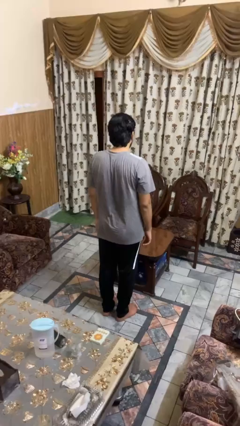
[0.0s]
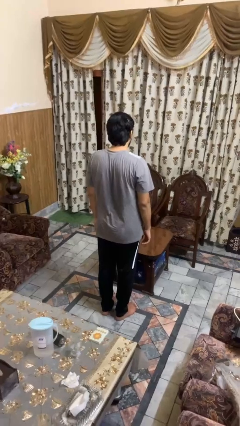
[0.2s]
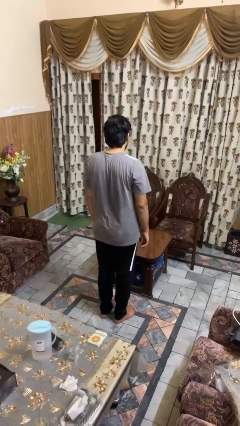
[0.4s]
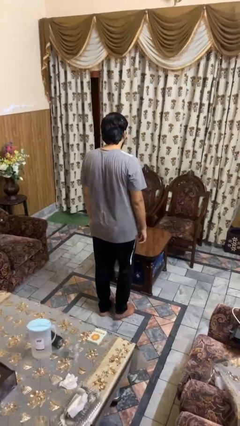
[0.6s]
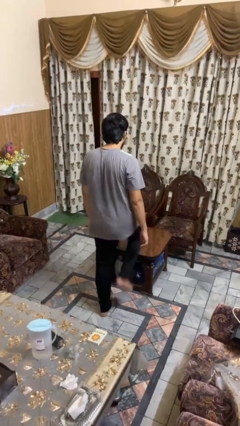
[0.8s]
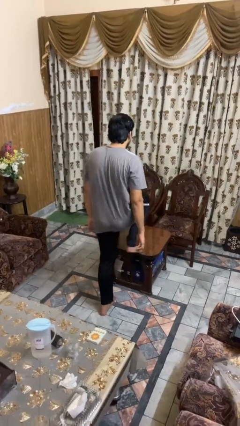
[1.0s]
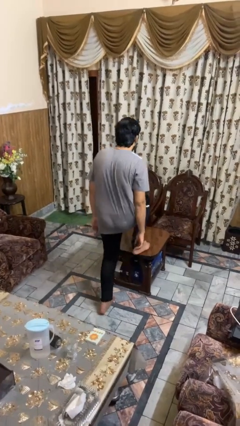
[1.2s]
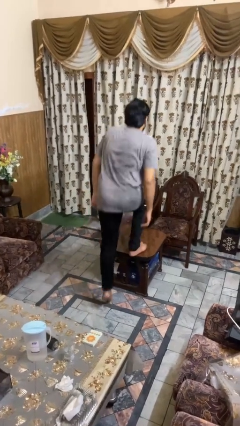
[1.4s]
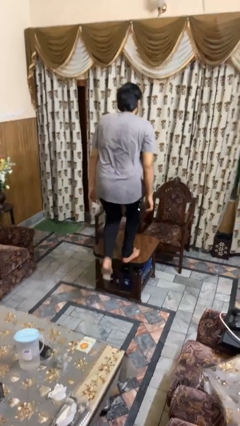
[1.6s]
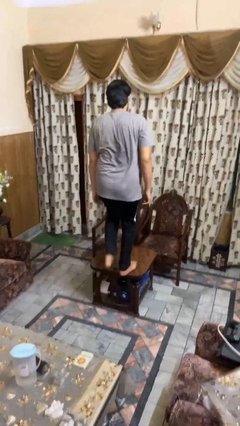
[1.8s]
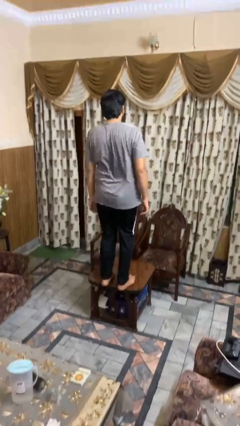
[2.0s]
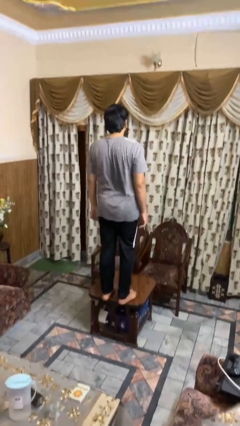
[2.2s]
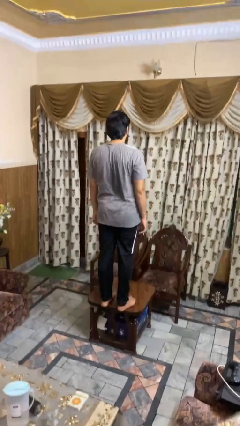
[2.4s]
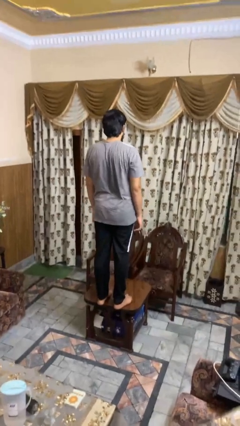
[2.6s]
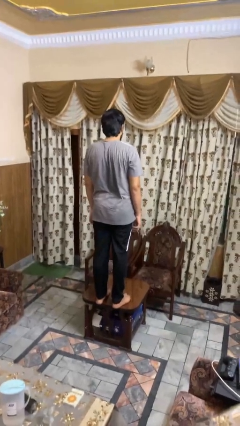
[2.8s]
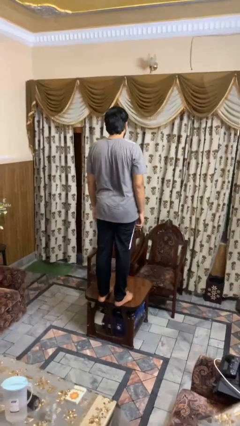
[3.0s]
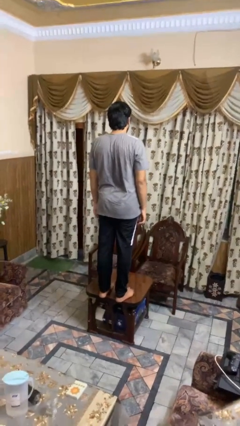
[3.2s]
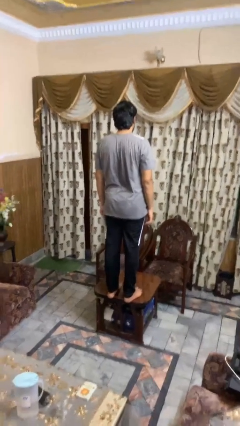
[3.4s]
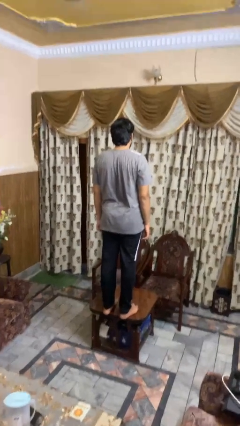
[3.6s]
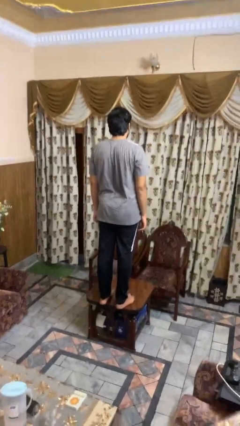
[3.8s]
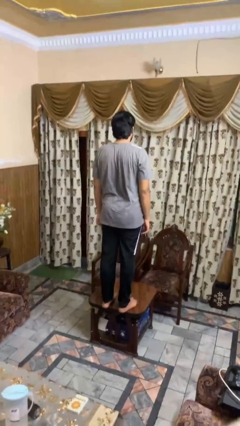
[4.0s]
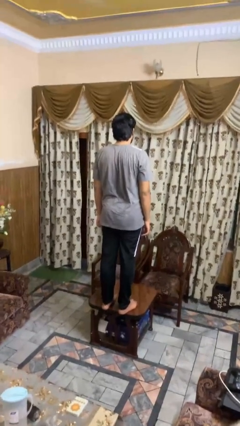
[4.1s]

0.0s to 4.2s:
person climbs on table

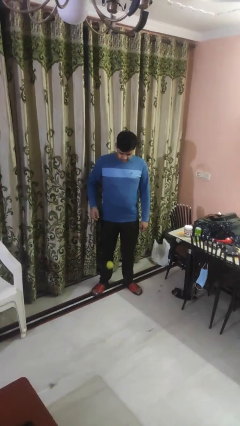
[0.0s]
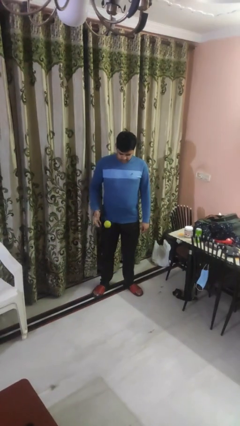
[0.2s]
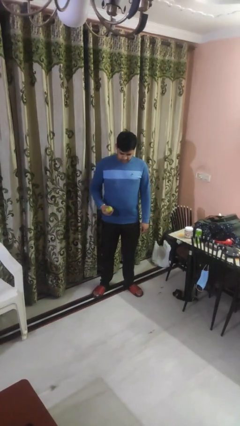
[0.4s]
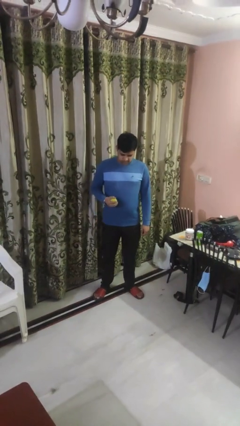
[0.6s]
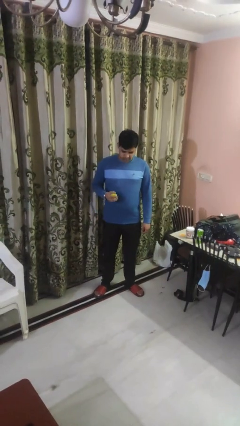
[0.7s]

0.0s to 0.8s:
person bounces ball on floor

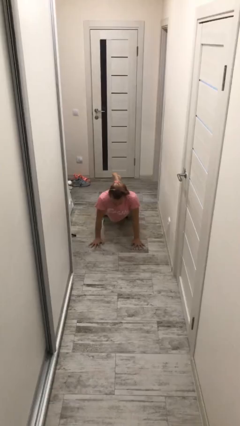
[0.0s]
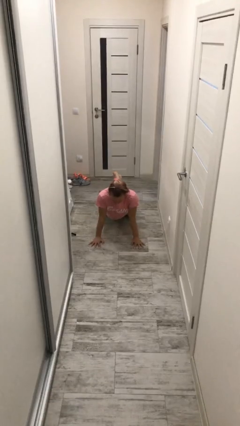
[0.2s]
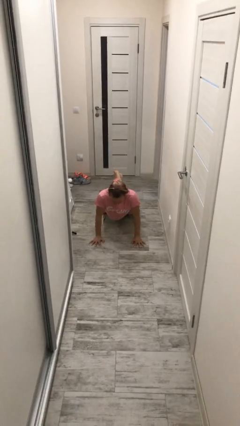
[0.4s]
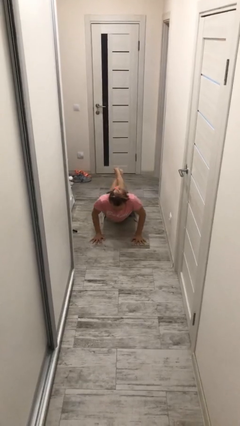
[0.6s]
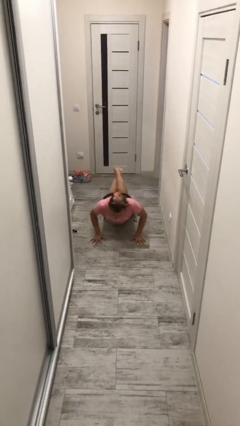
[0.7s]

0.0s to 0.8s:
person exercises with pushup

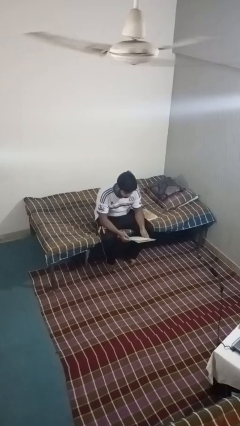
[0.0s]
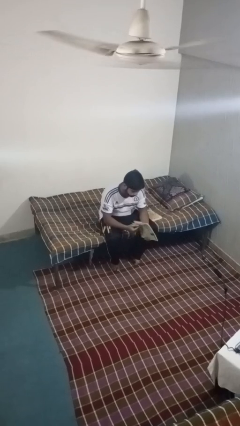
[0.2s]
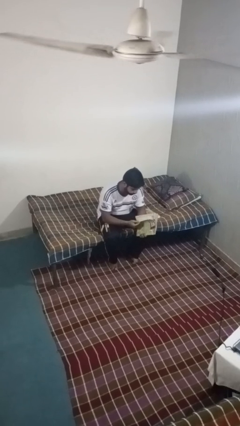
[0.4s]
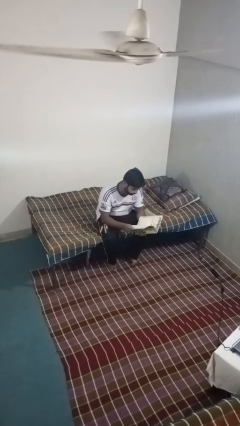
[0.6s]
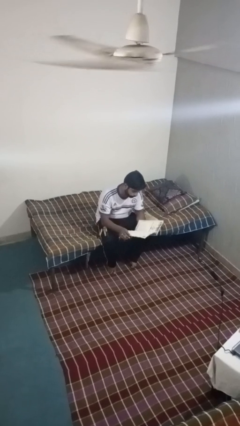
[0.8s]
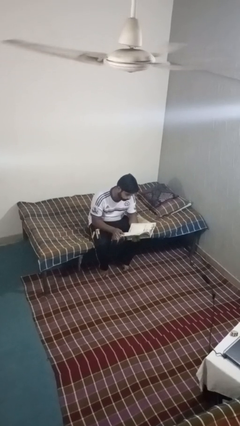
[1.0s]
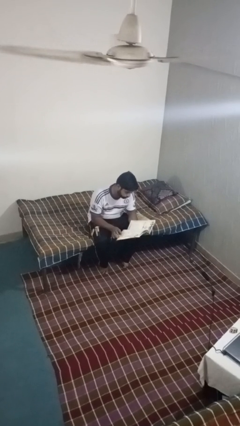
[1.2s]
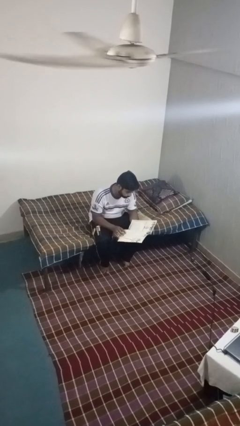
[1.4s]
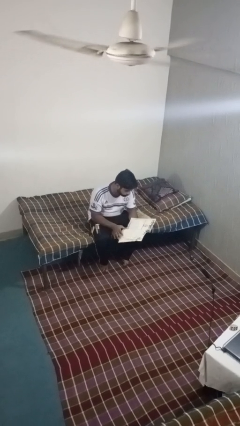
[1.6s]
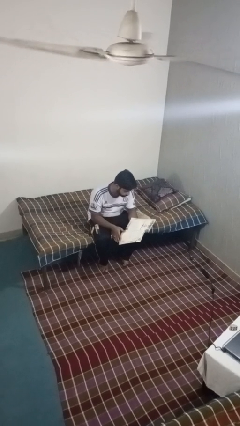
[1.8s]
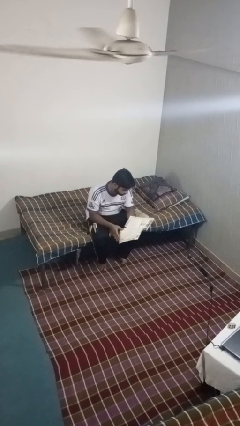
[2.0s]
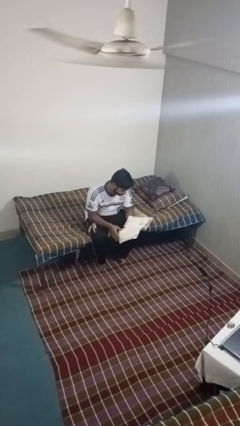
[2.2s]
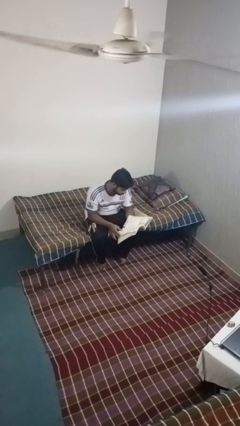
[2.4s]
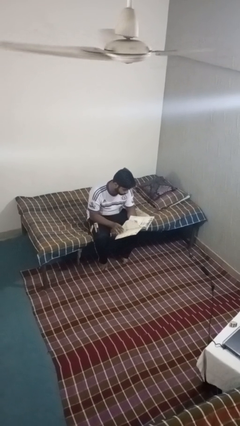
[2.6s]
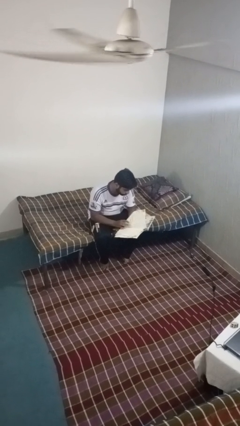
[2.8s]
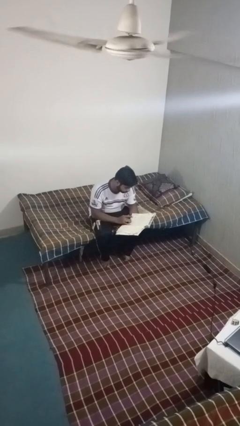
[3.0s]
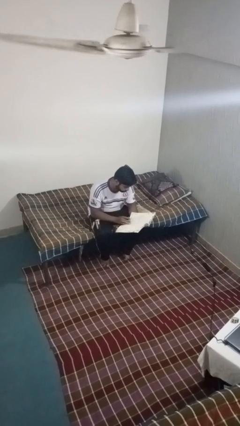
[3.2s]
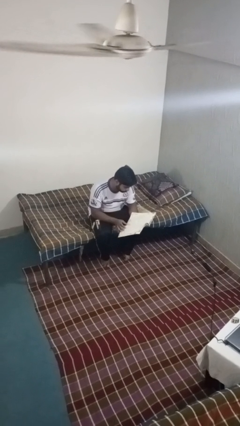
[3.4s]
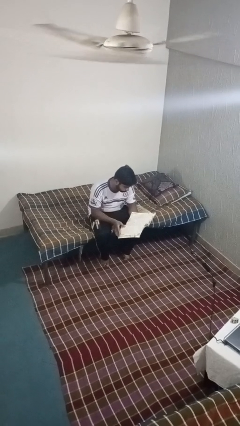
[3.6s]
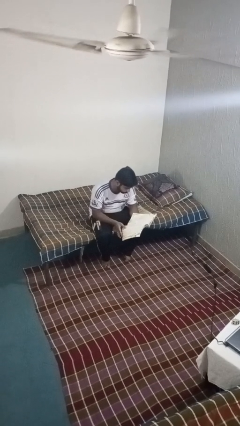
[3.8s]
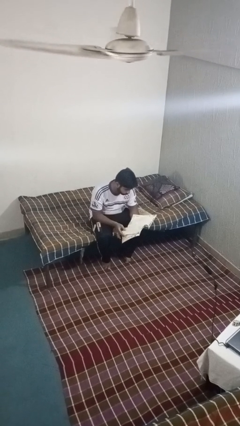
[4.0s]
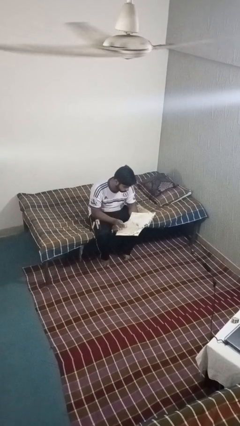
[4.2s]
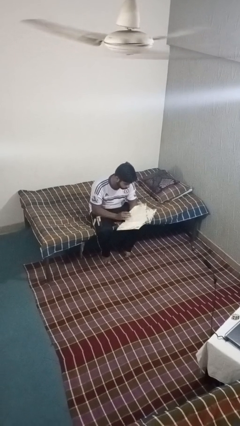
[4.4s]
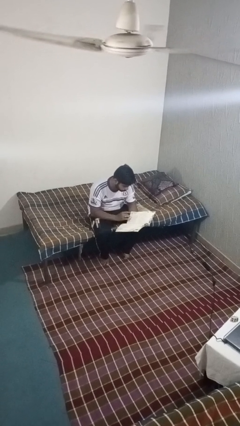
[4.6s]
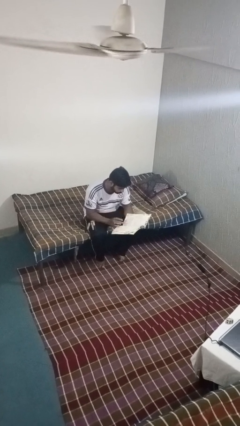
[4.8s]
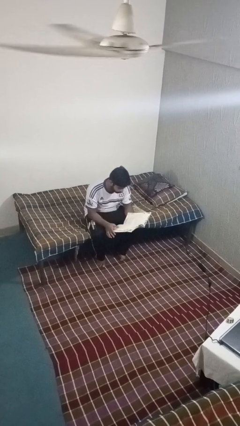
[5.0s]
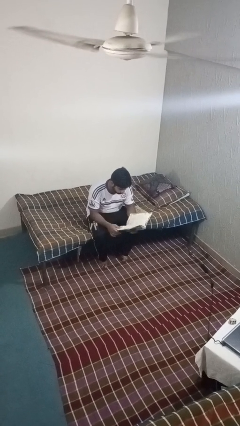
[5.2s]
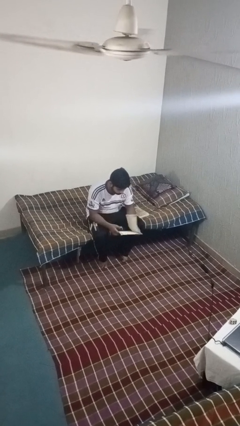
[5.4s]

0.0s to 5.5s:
person reads magazine

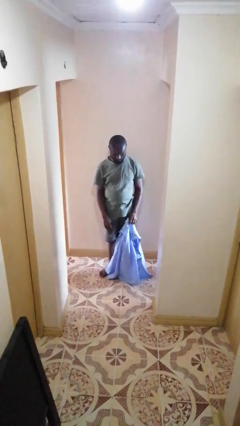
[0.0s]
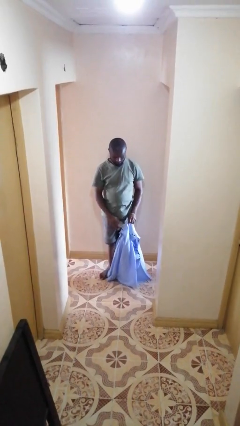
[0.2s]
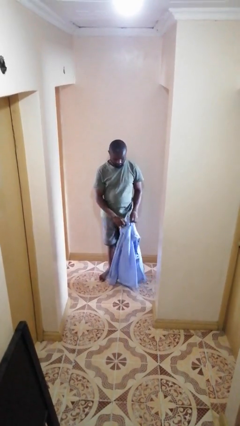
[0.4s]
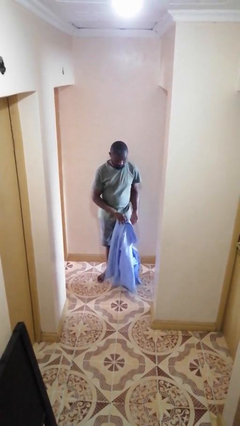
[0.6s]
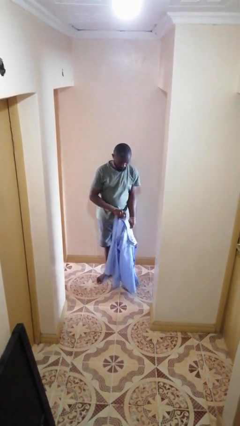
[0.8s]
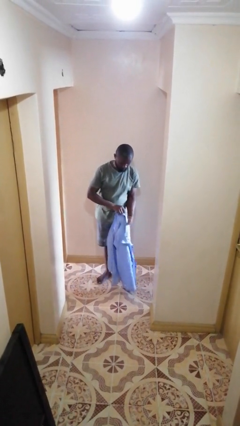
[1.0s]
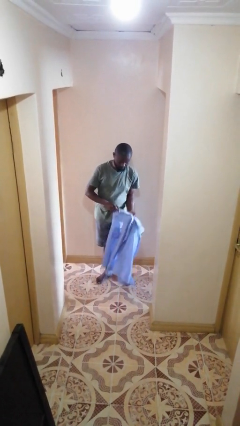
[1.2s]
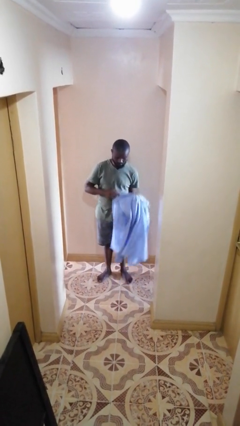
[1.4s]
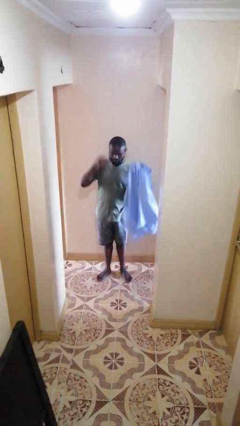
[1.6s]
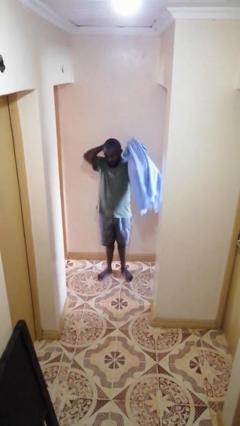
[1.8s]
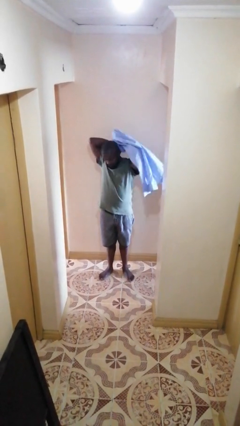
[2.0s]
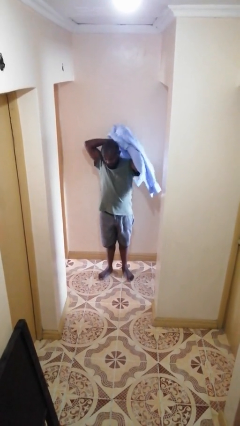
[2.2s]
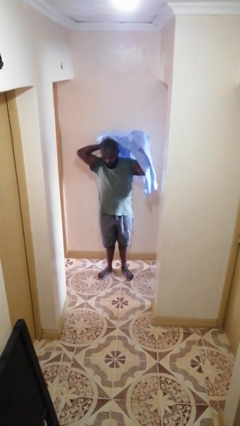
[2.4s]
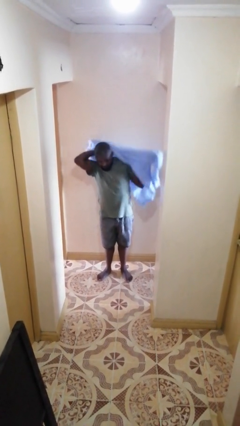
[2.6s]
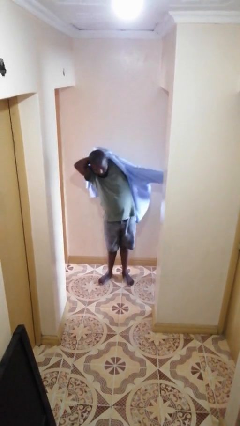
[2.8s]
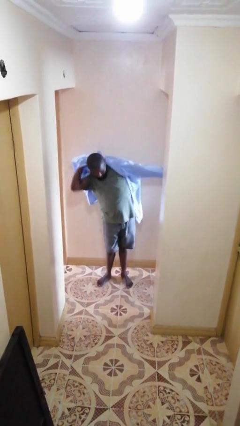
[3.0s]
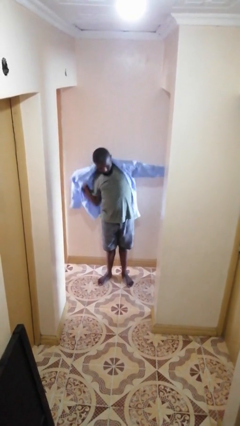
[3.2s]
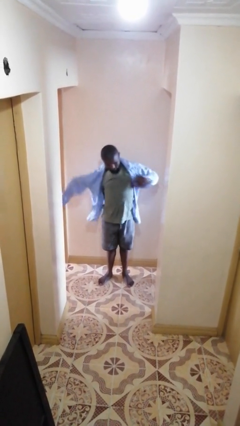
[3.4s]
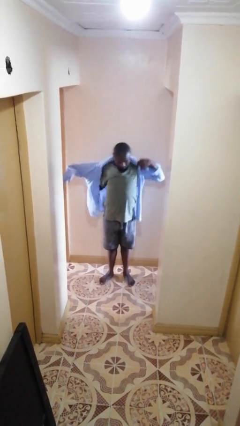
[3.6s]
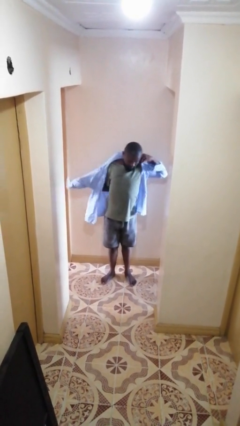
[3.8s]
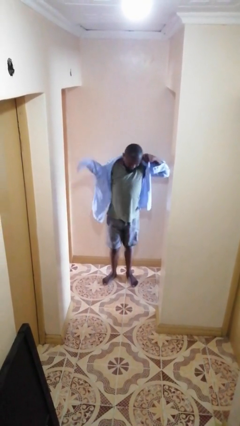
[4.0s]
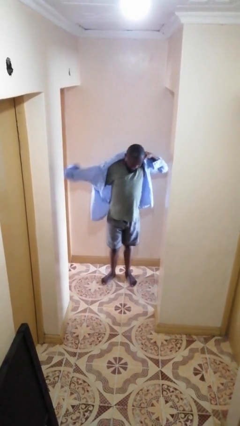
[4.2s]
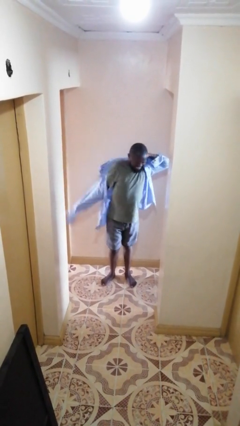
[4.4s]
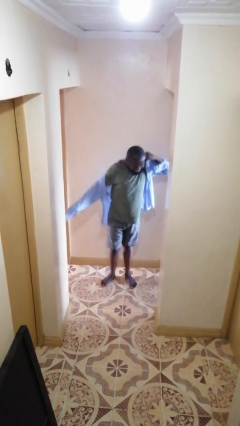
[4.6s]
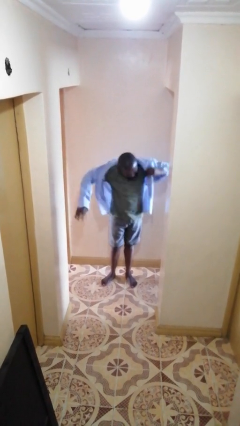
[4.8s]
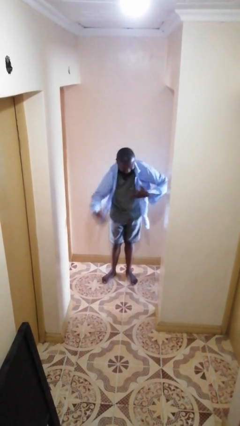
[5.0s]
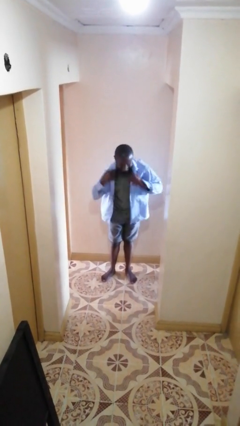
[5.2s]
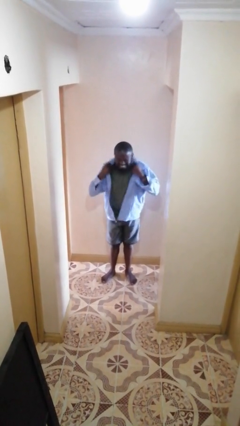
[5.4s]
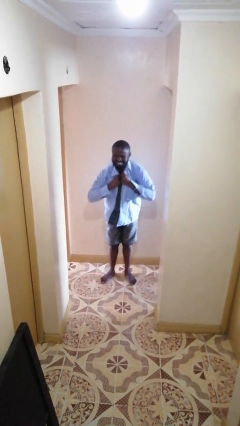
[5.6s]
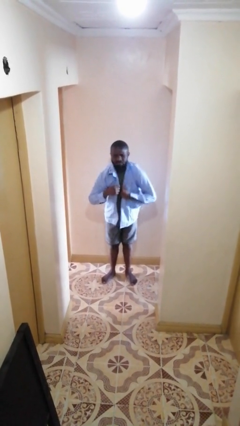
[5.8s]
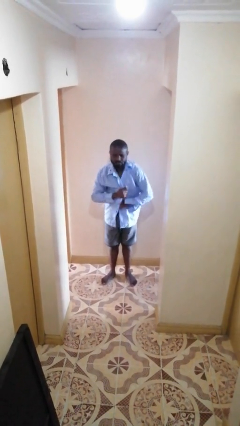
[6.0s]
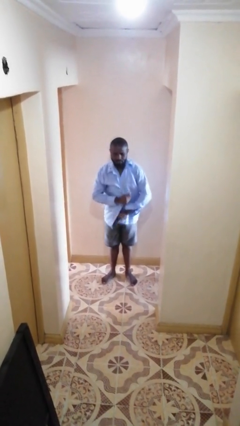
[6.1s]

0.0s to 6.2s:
person puts on shirt

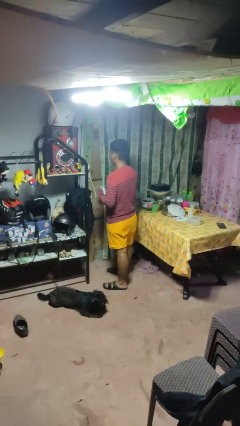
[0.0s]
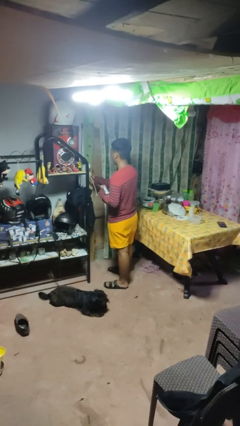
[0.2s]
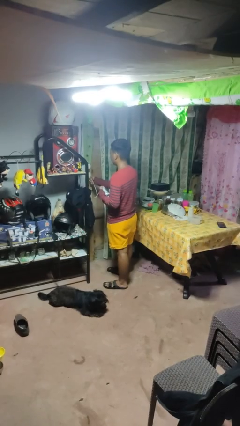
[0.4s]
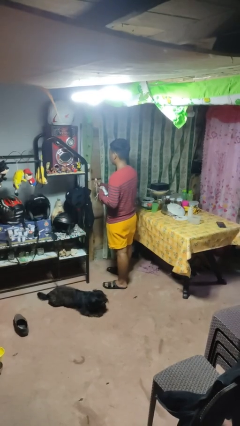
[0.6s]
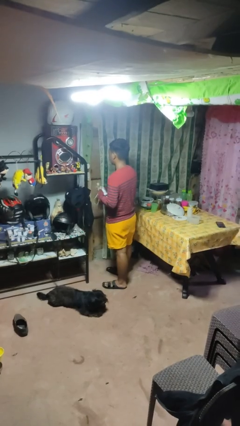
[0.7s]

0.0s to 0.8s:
person unplugs from electrical socket
